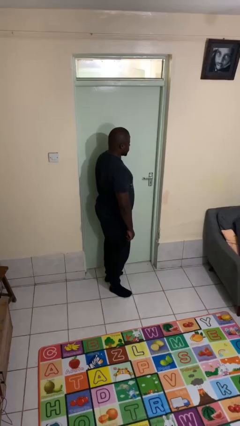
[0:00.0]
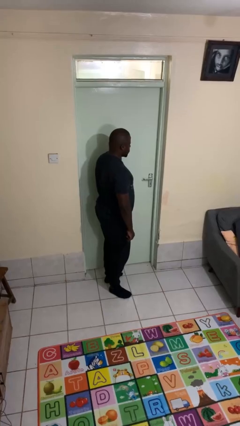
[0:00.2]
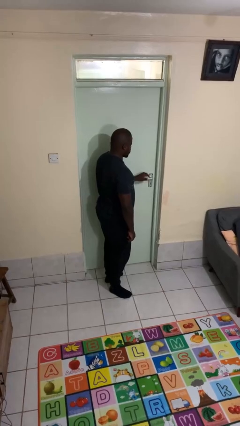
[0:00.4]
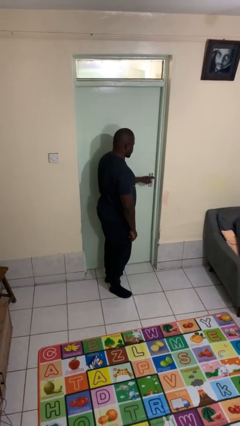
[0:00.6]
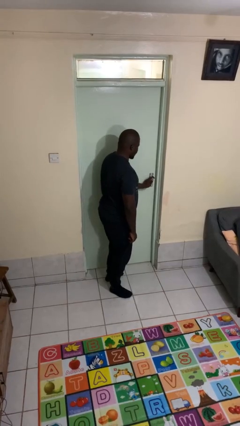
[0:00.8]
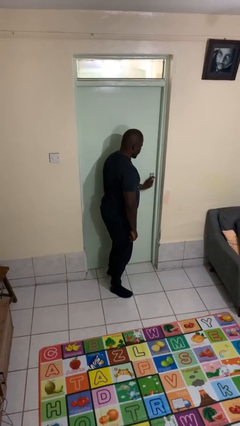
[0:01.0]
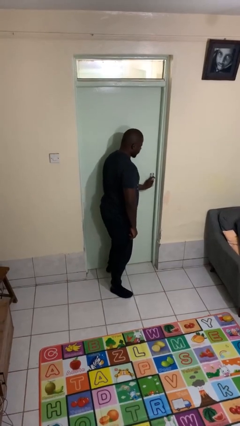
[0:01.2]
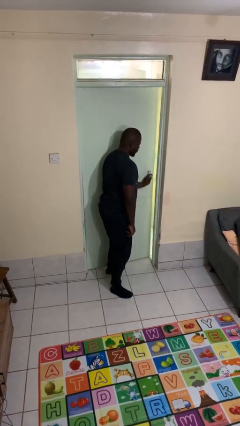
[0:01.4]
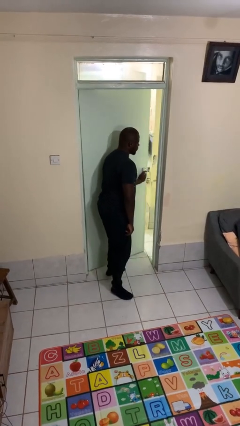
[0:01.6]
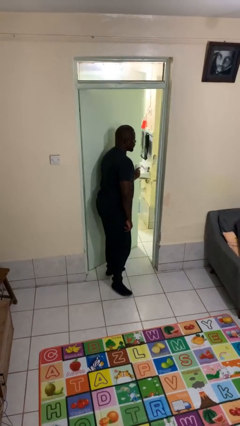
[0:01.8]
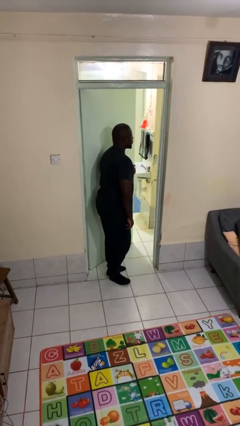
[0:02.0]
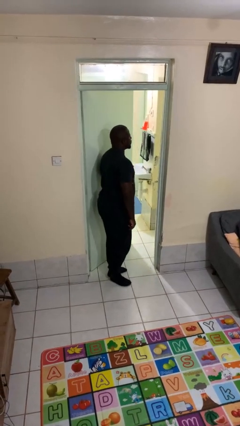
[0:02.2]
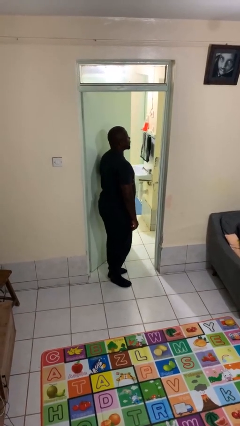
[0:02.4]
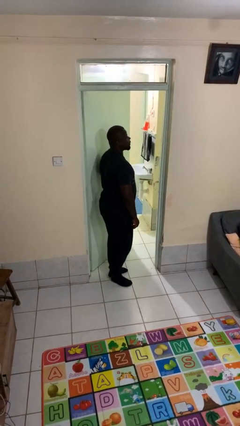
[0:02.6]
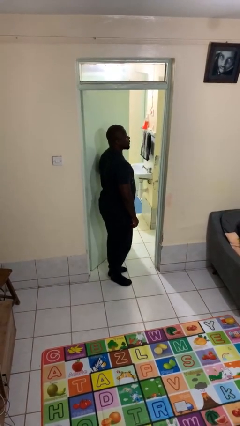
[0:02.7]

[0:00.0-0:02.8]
person opens facility door

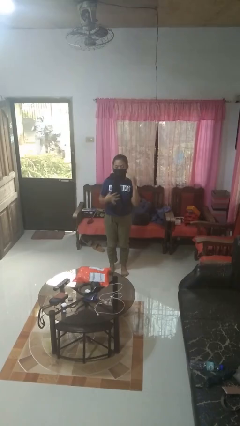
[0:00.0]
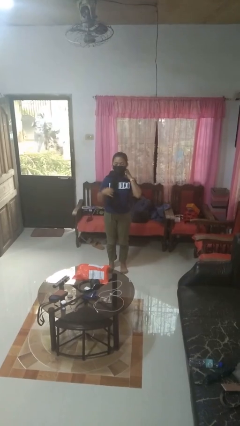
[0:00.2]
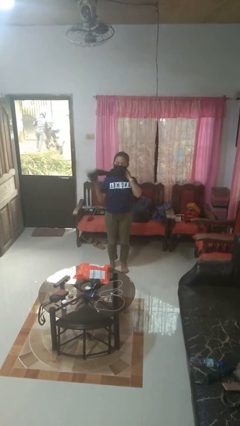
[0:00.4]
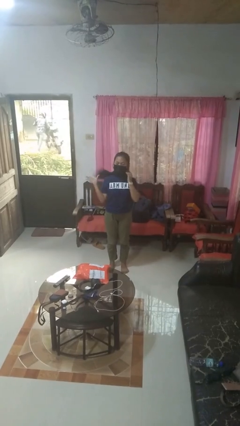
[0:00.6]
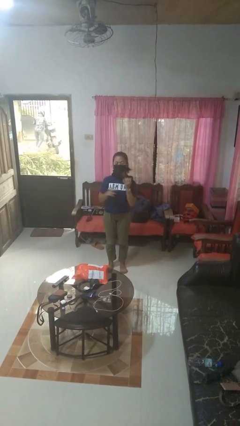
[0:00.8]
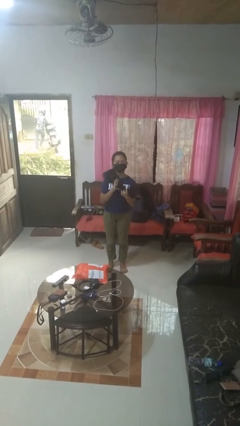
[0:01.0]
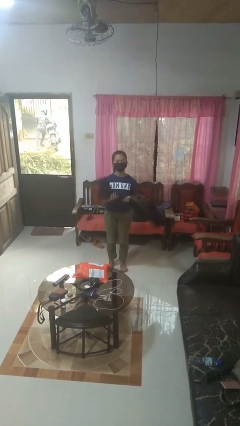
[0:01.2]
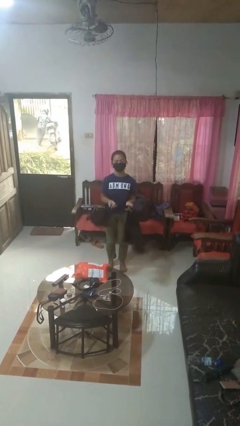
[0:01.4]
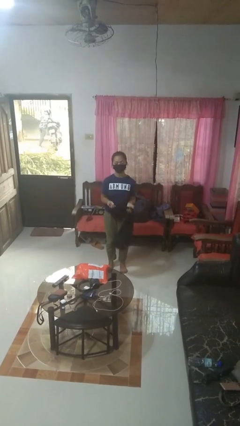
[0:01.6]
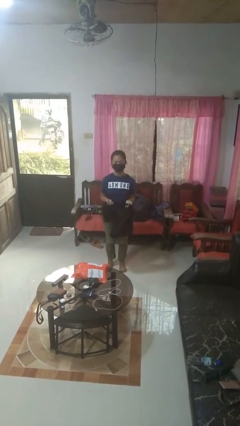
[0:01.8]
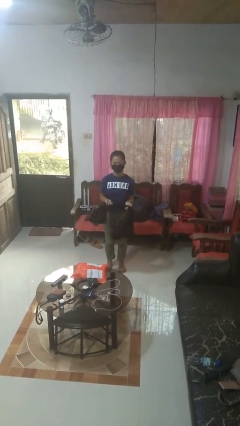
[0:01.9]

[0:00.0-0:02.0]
person takes off scarf

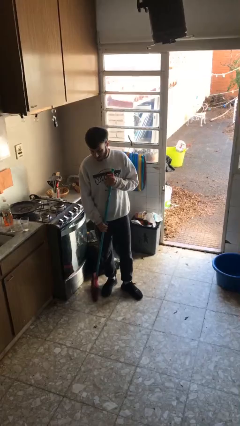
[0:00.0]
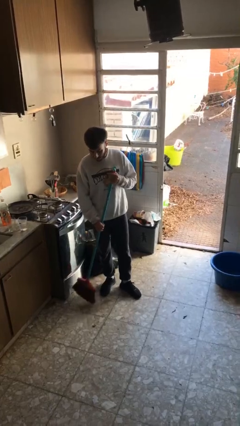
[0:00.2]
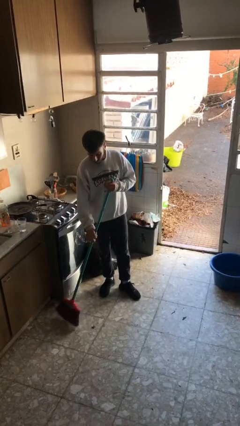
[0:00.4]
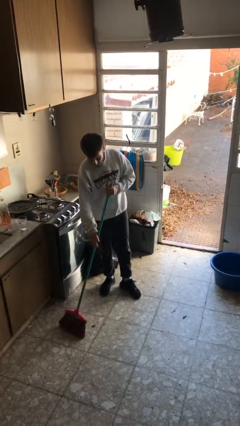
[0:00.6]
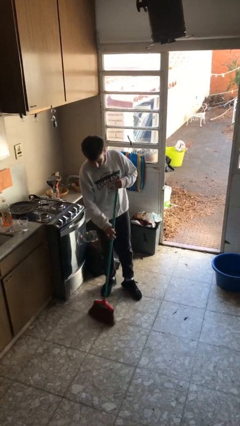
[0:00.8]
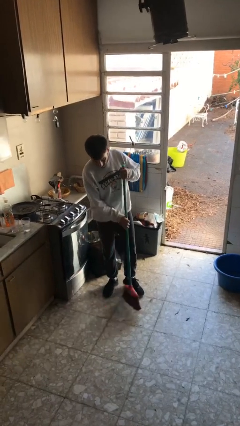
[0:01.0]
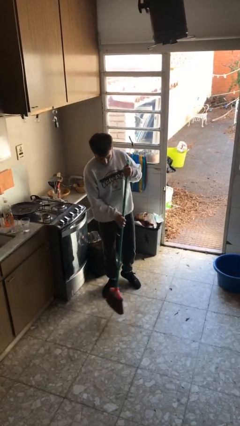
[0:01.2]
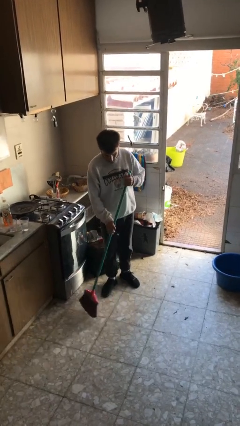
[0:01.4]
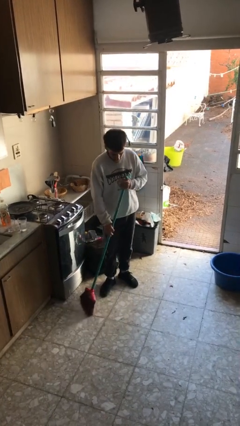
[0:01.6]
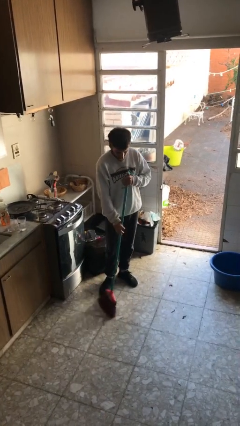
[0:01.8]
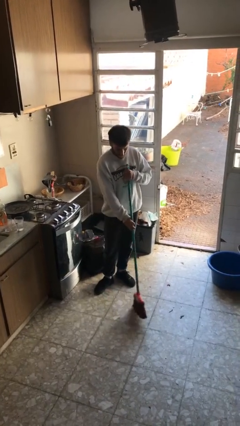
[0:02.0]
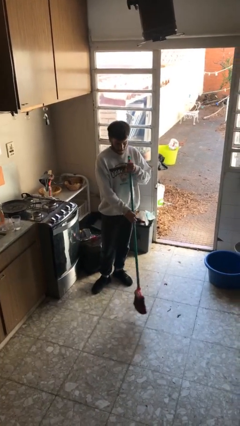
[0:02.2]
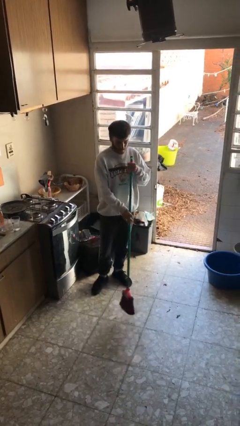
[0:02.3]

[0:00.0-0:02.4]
person sweeps floor

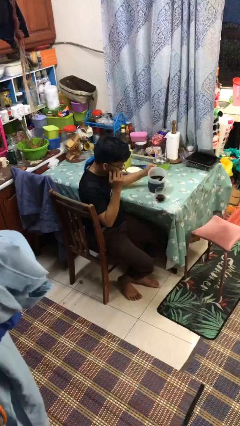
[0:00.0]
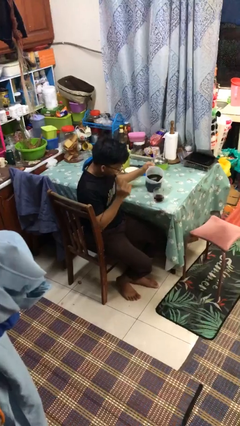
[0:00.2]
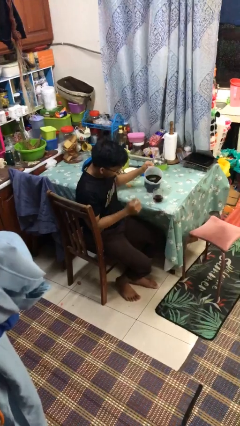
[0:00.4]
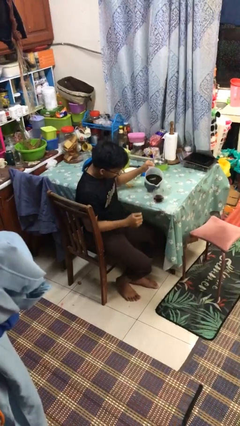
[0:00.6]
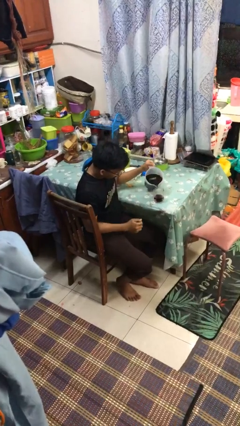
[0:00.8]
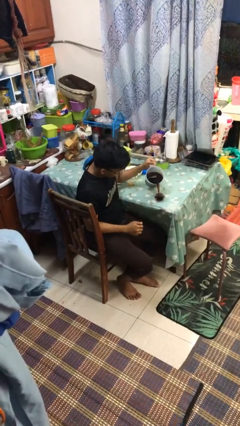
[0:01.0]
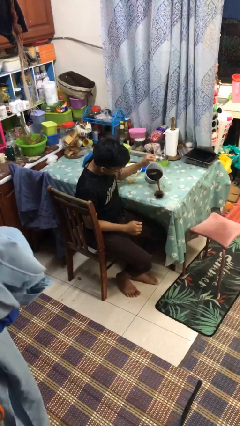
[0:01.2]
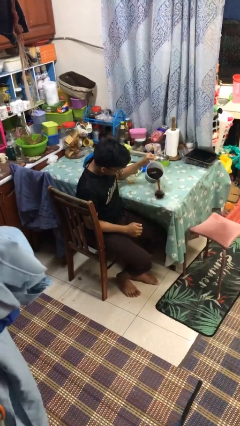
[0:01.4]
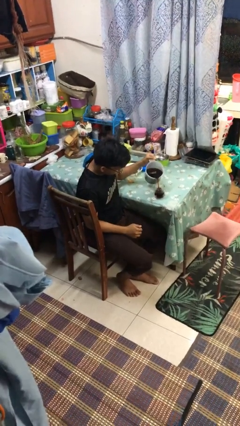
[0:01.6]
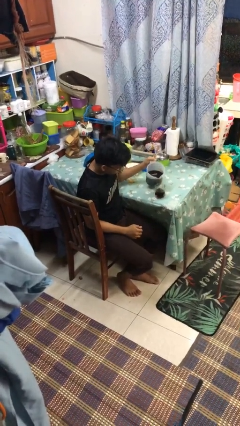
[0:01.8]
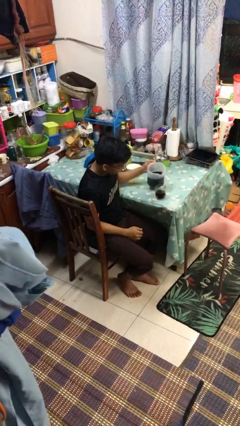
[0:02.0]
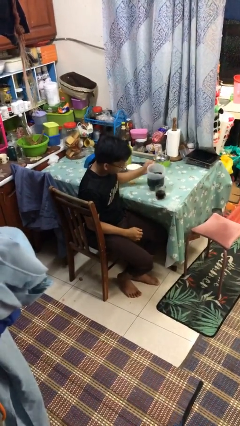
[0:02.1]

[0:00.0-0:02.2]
person pours coffee into mug

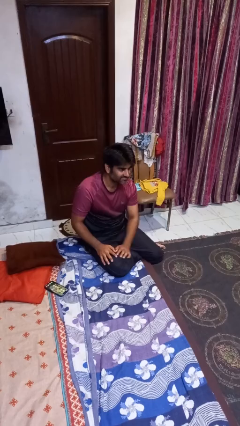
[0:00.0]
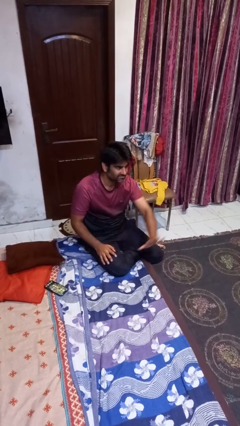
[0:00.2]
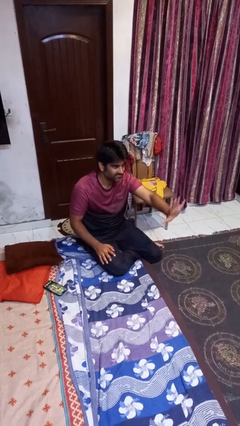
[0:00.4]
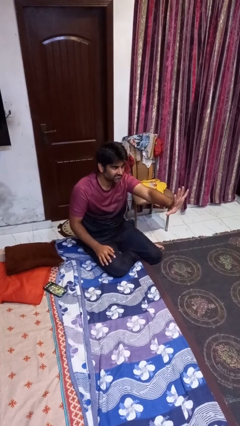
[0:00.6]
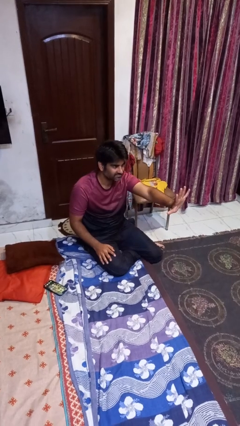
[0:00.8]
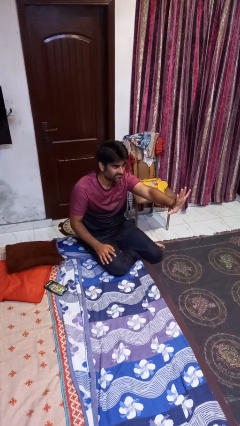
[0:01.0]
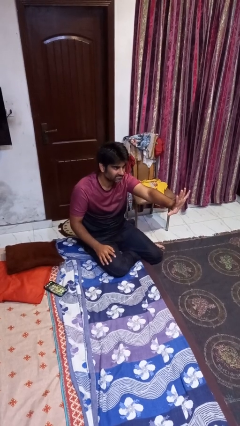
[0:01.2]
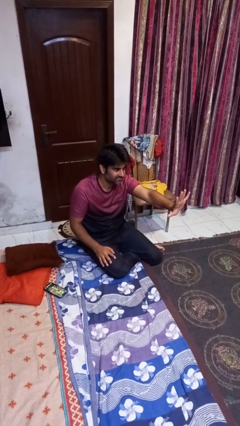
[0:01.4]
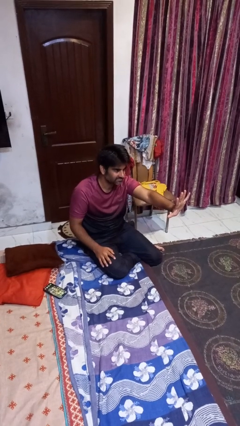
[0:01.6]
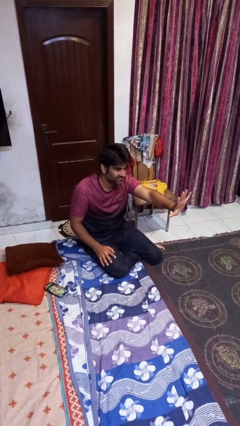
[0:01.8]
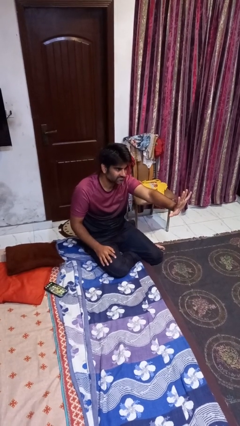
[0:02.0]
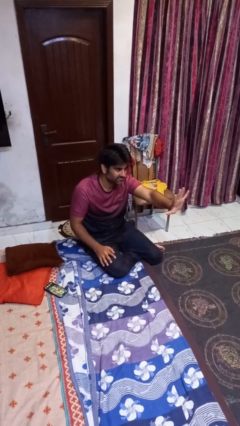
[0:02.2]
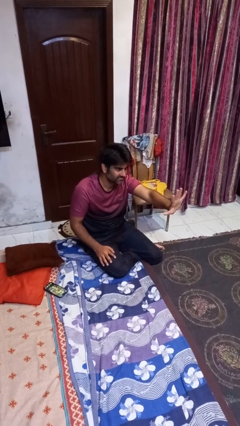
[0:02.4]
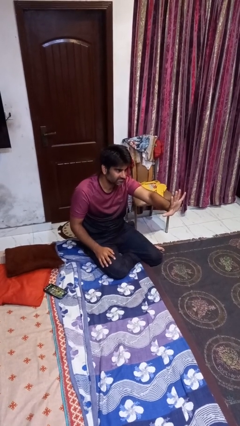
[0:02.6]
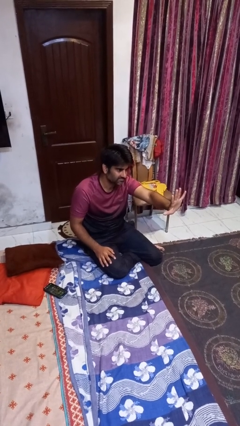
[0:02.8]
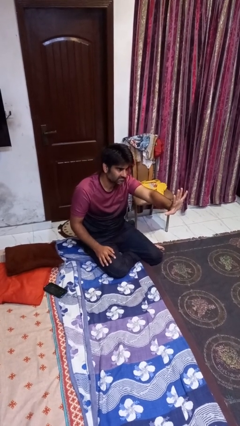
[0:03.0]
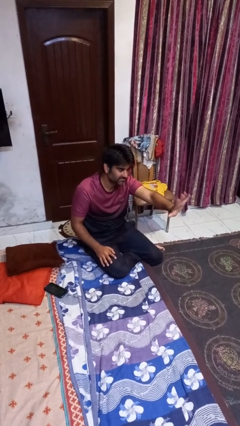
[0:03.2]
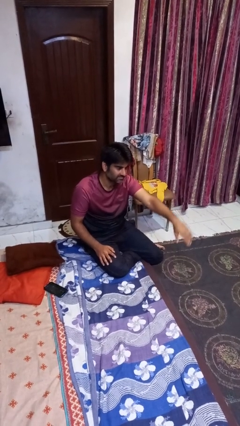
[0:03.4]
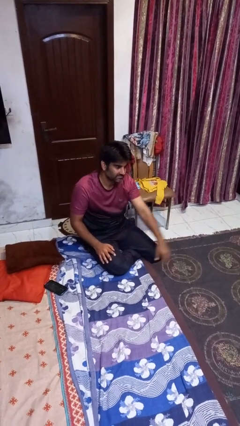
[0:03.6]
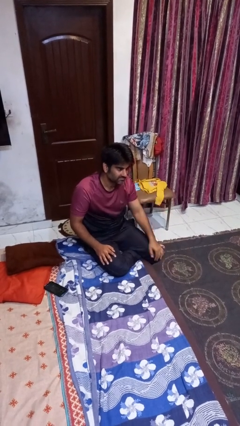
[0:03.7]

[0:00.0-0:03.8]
person gestures number five

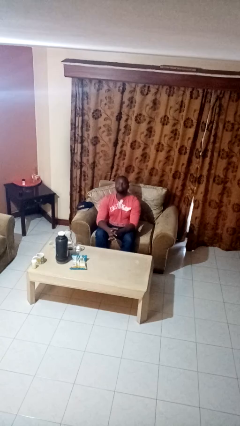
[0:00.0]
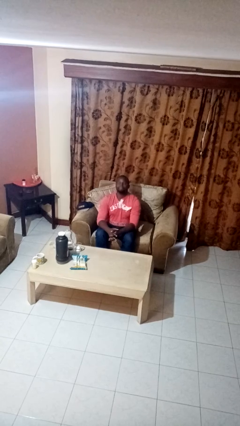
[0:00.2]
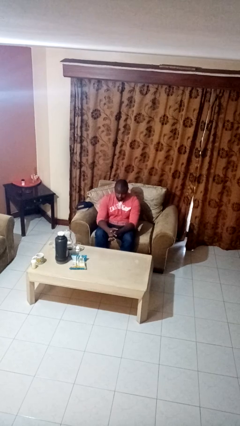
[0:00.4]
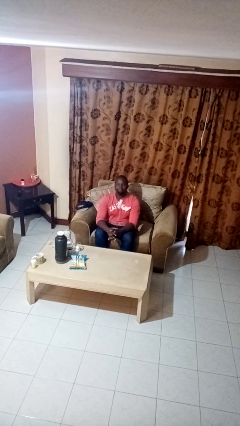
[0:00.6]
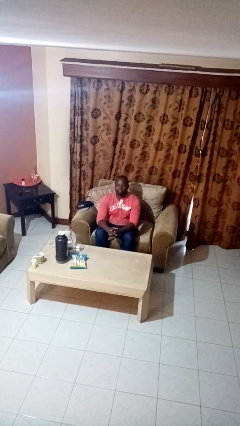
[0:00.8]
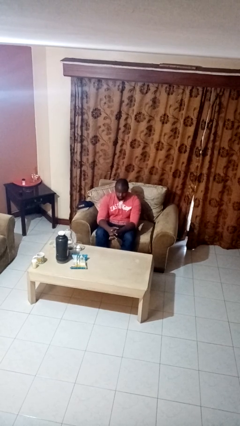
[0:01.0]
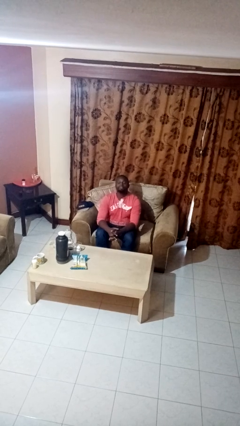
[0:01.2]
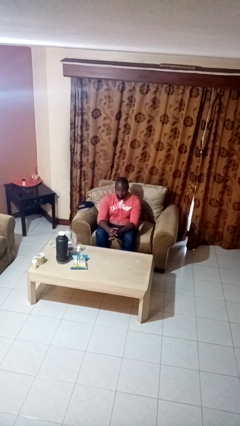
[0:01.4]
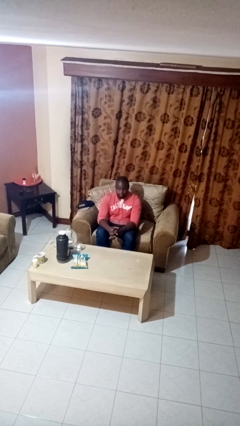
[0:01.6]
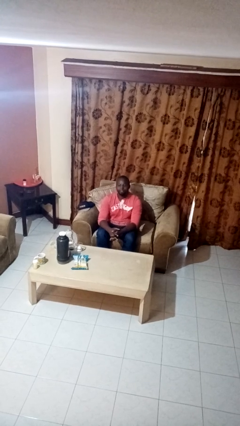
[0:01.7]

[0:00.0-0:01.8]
person nods head

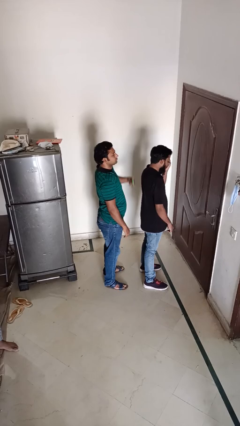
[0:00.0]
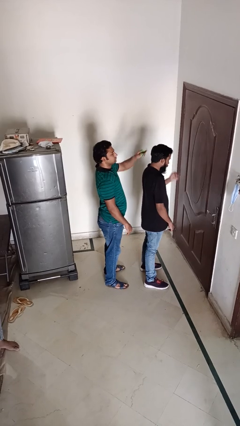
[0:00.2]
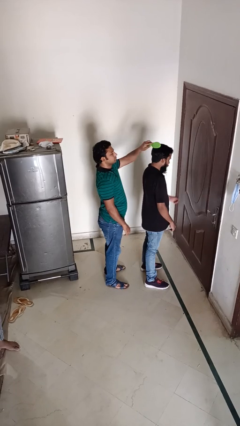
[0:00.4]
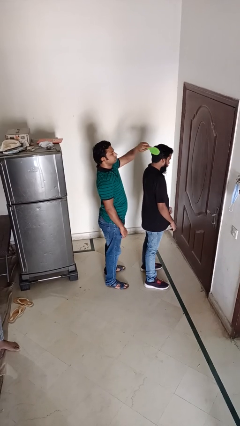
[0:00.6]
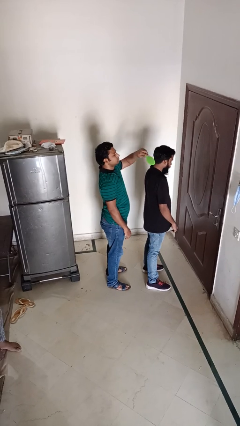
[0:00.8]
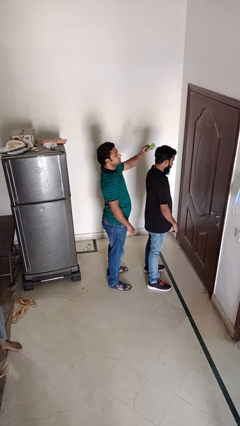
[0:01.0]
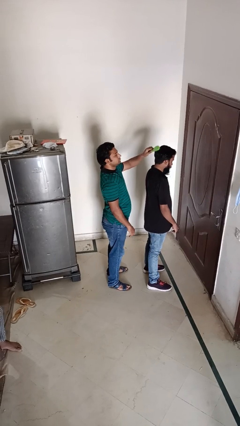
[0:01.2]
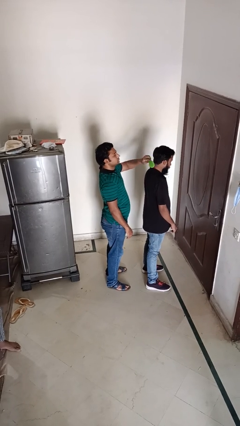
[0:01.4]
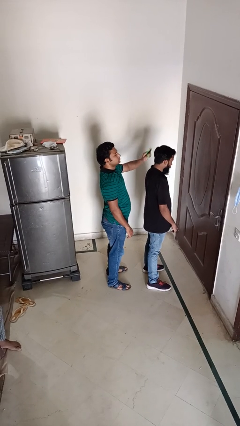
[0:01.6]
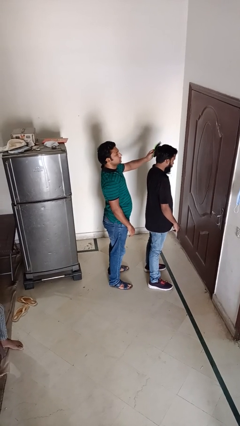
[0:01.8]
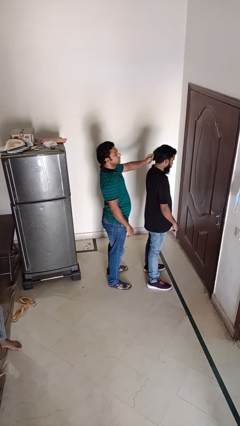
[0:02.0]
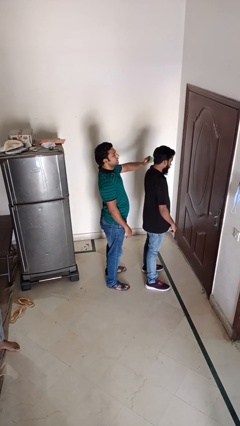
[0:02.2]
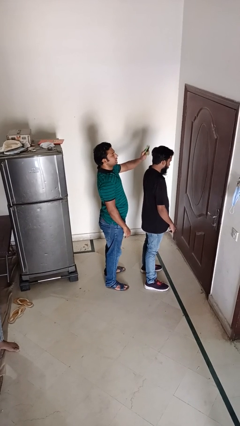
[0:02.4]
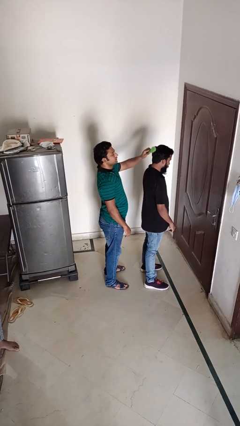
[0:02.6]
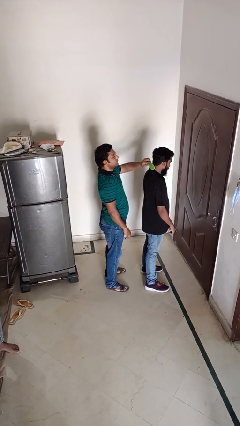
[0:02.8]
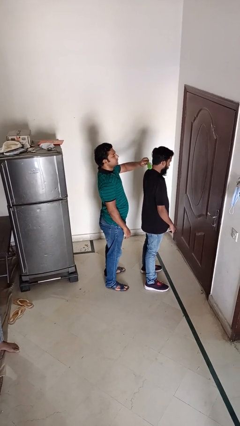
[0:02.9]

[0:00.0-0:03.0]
person brushes hair of person
